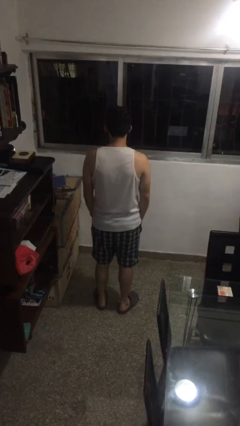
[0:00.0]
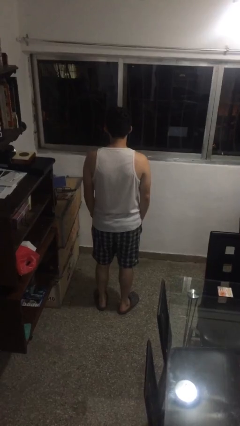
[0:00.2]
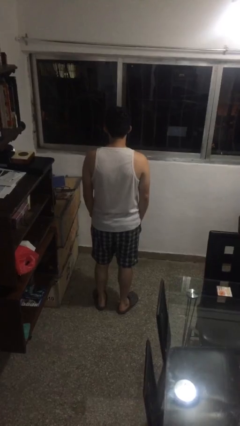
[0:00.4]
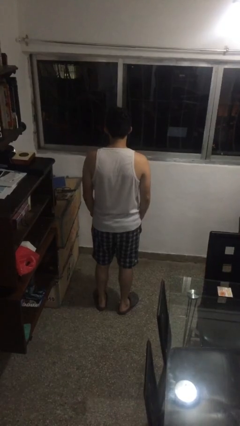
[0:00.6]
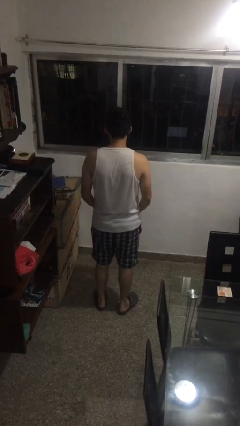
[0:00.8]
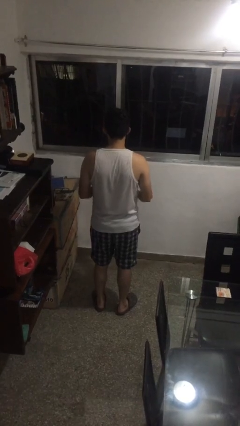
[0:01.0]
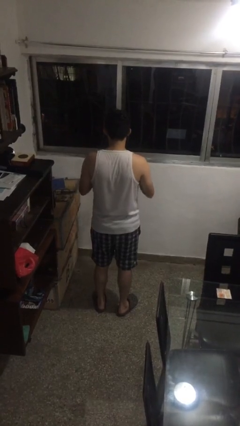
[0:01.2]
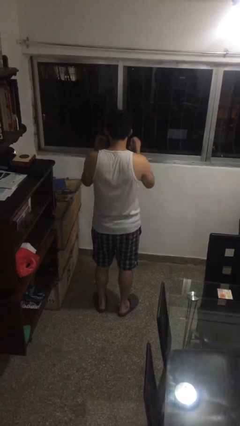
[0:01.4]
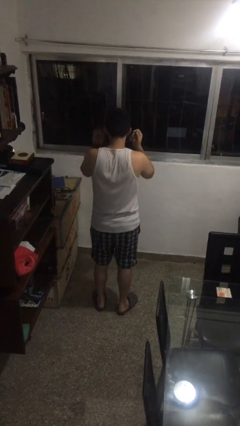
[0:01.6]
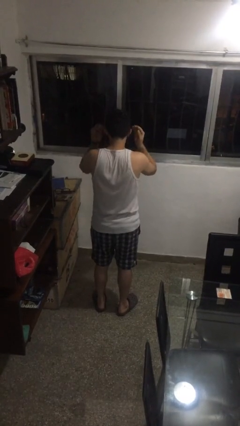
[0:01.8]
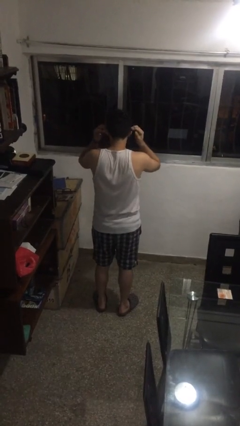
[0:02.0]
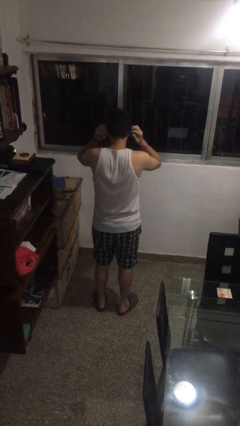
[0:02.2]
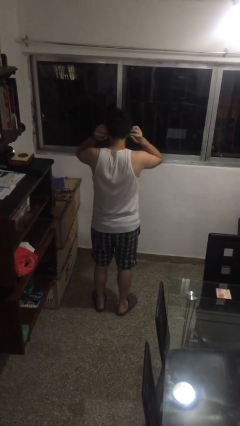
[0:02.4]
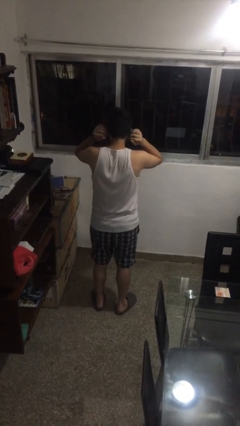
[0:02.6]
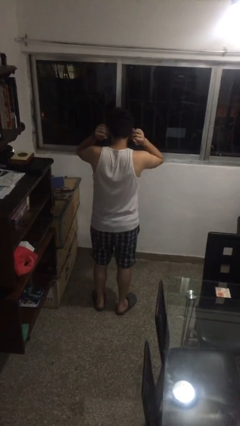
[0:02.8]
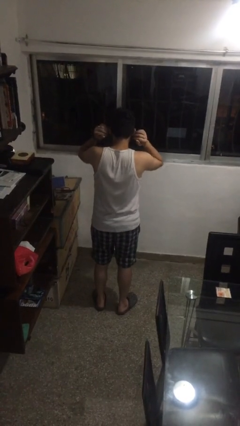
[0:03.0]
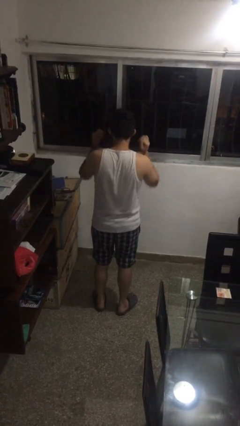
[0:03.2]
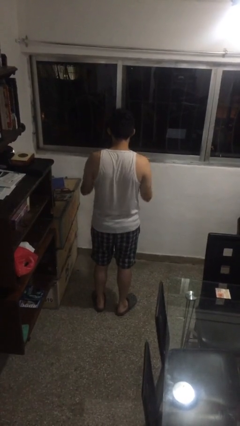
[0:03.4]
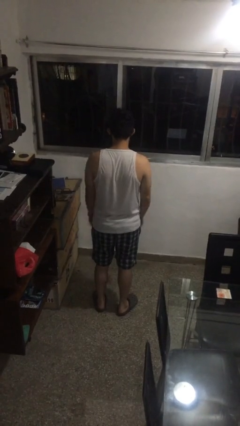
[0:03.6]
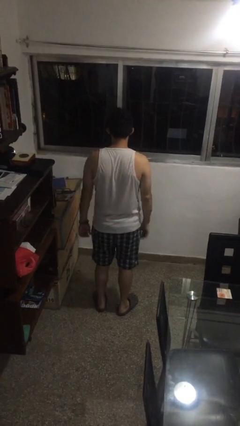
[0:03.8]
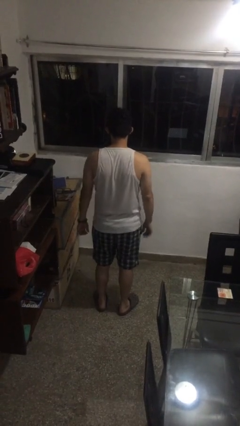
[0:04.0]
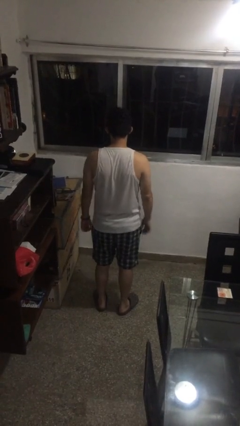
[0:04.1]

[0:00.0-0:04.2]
person puts on facemask

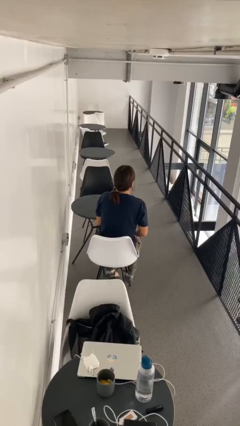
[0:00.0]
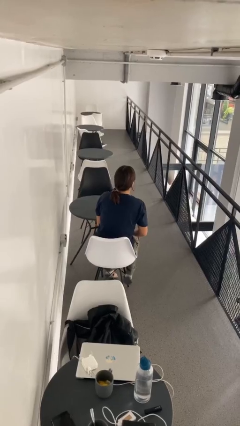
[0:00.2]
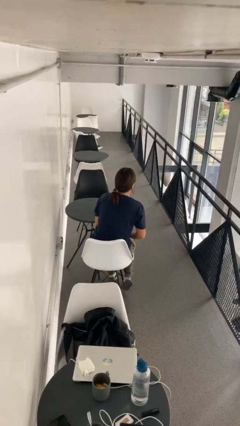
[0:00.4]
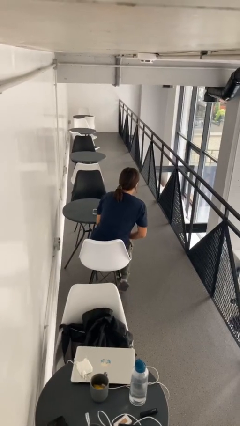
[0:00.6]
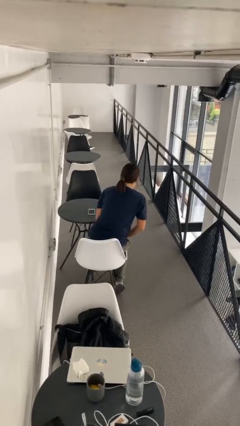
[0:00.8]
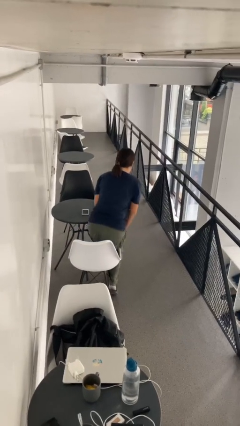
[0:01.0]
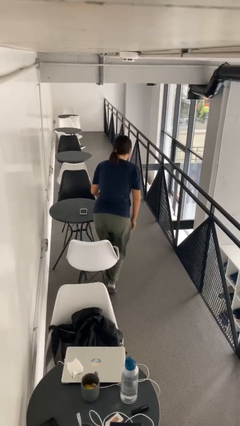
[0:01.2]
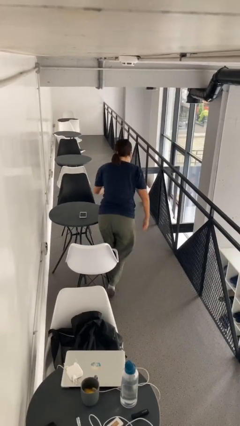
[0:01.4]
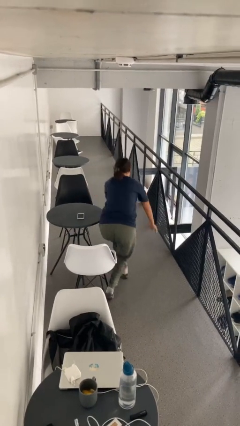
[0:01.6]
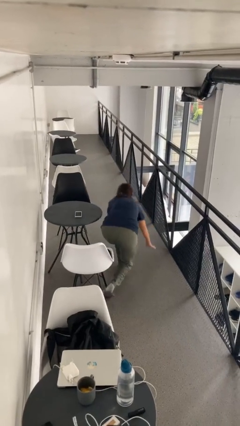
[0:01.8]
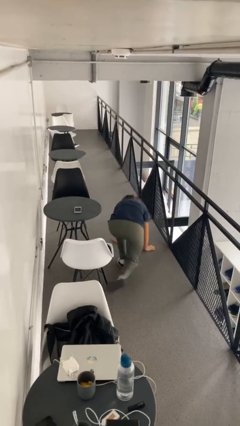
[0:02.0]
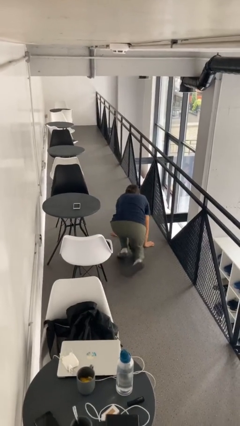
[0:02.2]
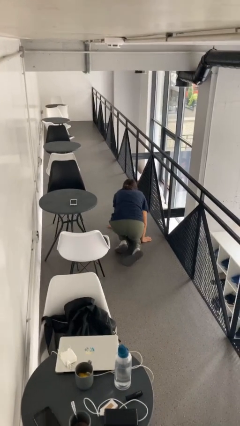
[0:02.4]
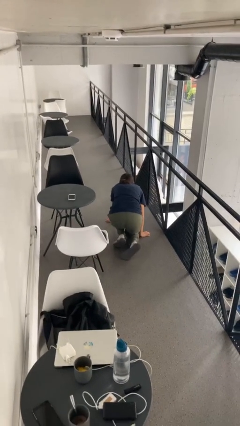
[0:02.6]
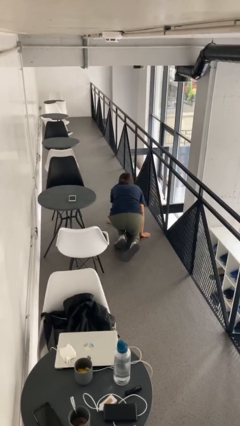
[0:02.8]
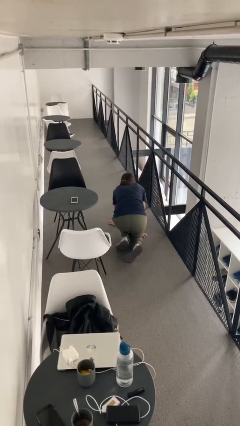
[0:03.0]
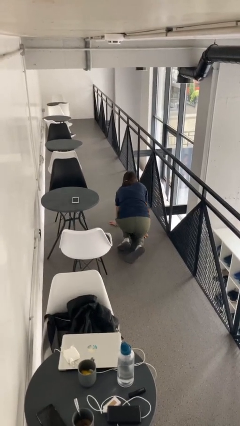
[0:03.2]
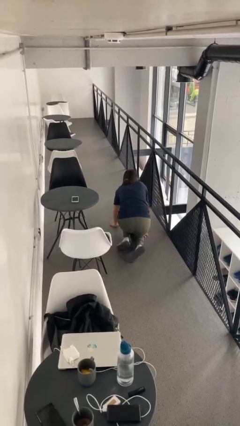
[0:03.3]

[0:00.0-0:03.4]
person falls from chair

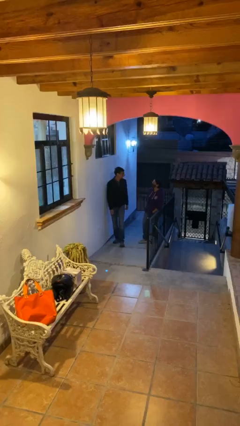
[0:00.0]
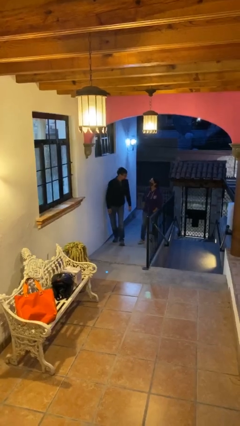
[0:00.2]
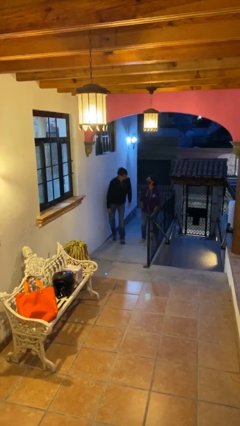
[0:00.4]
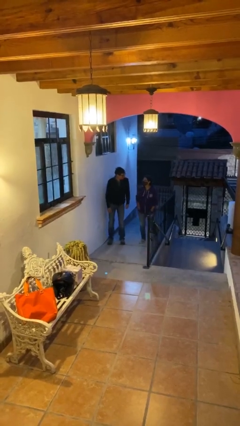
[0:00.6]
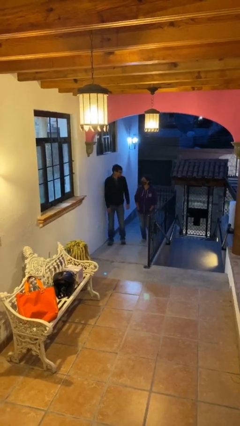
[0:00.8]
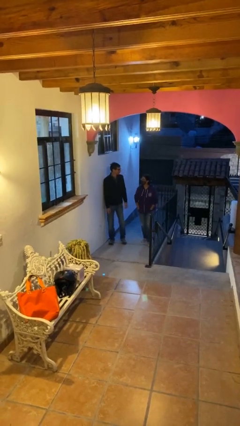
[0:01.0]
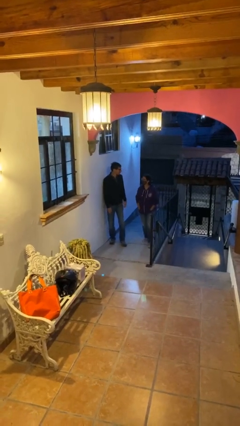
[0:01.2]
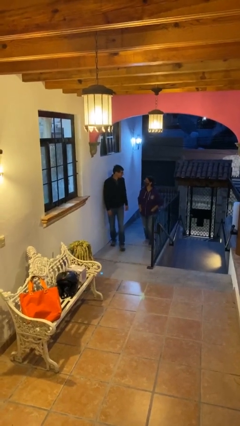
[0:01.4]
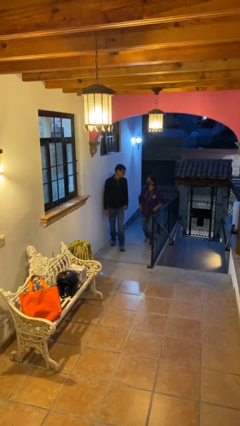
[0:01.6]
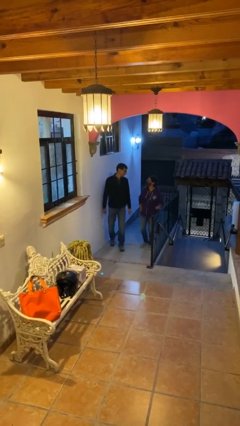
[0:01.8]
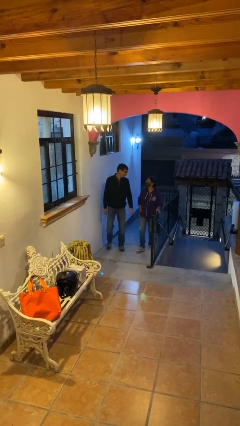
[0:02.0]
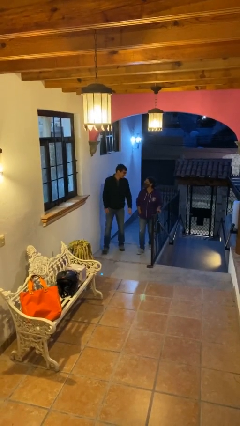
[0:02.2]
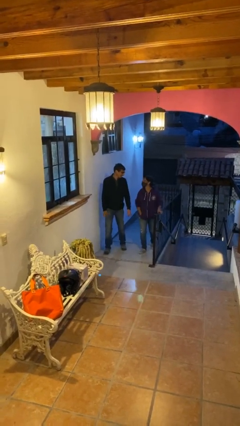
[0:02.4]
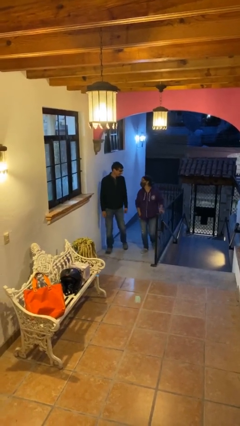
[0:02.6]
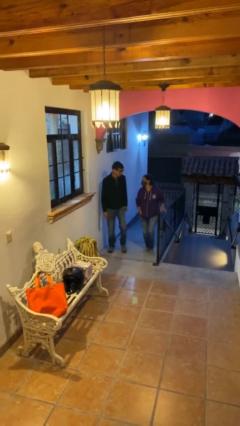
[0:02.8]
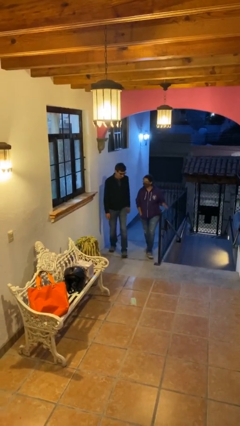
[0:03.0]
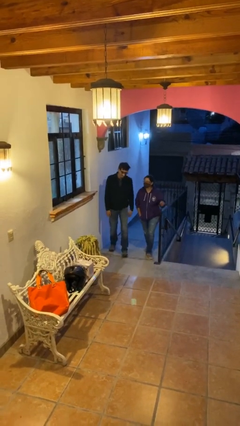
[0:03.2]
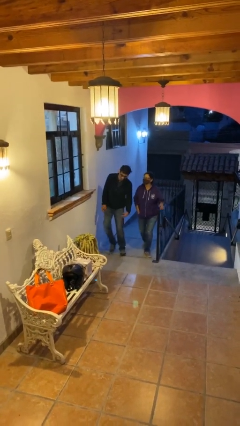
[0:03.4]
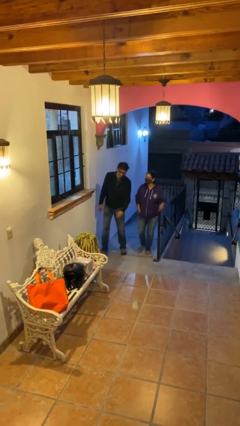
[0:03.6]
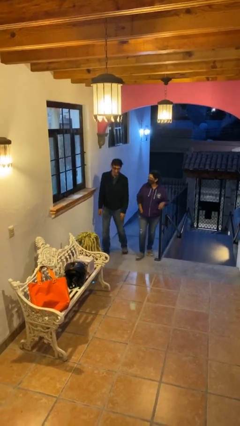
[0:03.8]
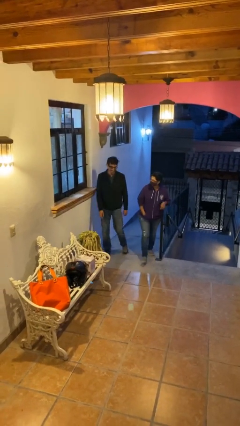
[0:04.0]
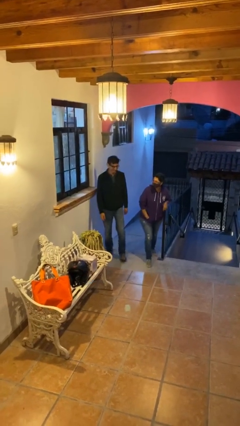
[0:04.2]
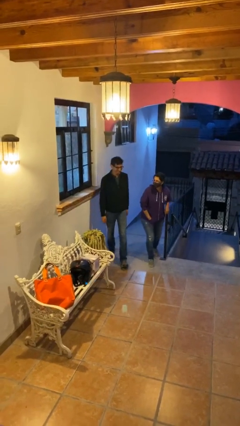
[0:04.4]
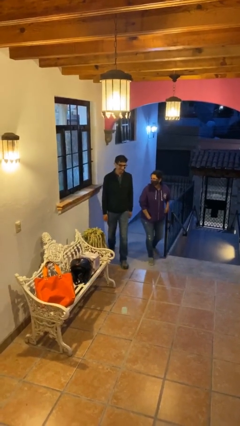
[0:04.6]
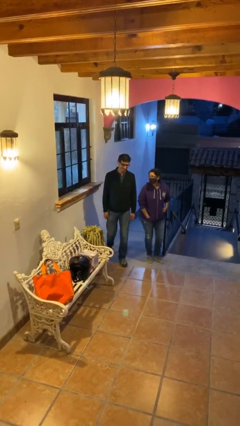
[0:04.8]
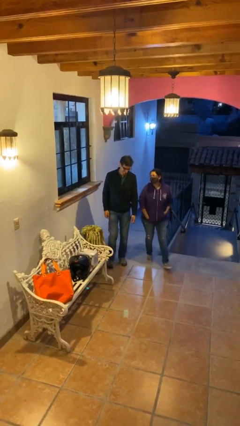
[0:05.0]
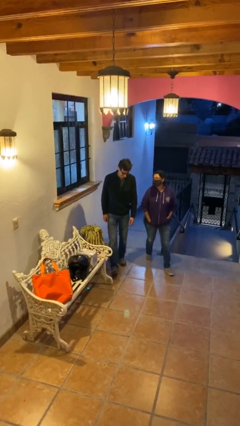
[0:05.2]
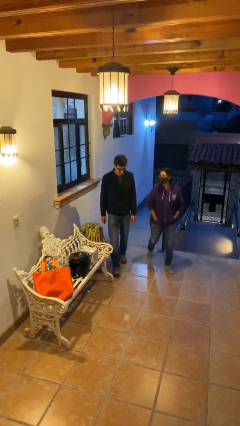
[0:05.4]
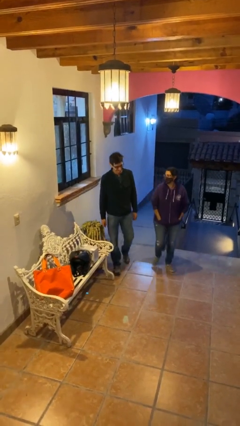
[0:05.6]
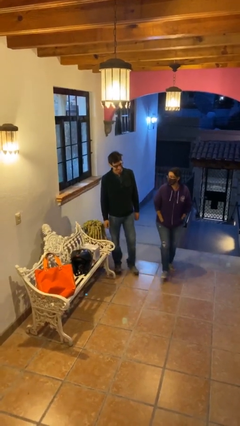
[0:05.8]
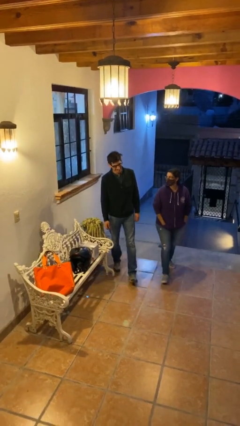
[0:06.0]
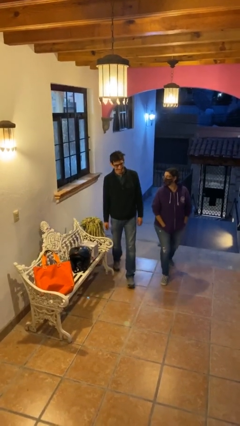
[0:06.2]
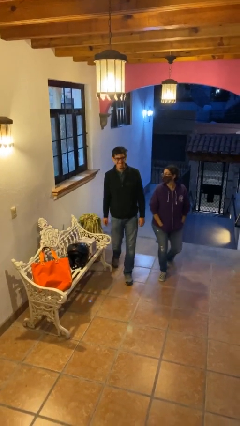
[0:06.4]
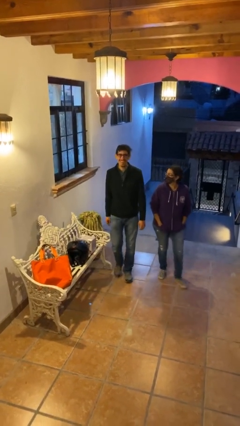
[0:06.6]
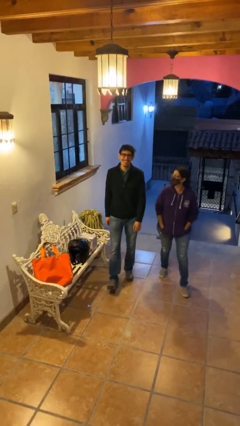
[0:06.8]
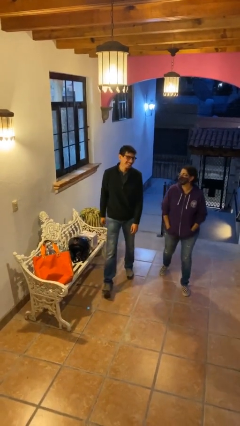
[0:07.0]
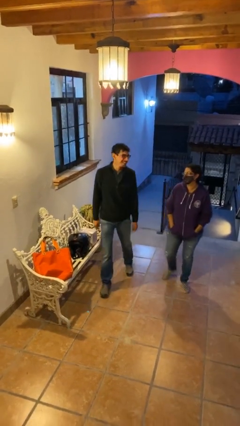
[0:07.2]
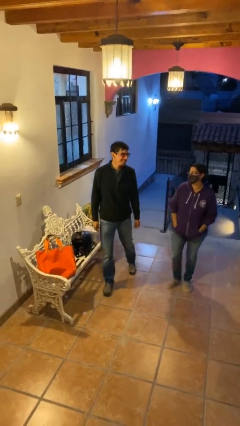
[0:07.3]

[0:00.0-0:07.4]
person talks to person

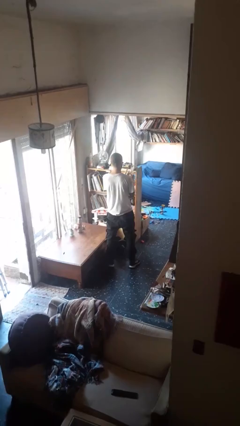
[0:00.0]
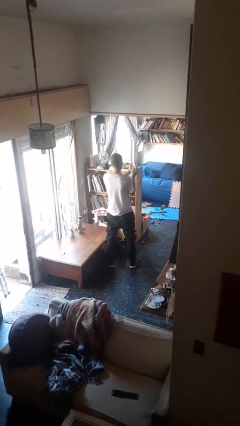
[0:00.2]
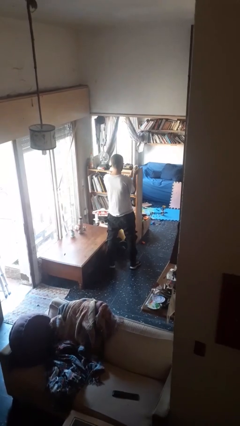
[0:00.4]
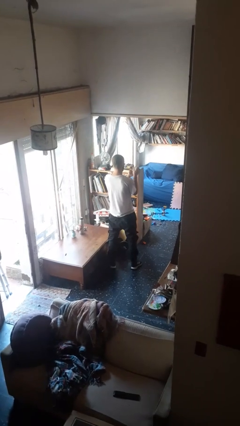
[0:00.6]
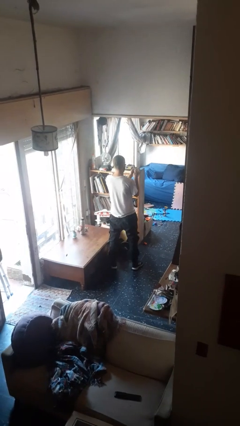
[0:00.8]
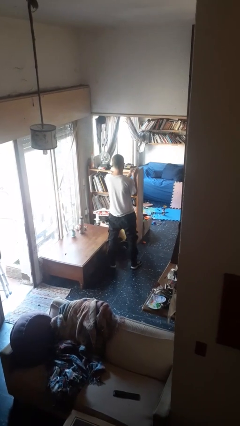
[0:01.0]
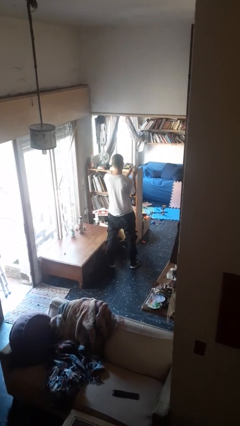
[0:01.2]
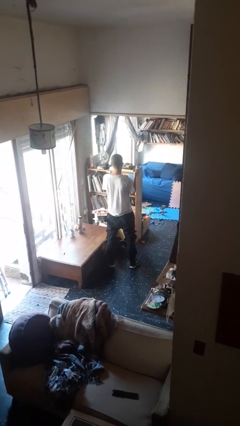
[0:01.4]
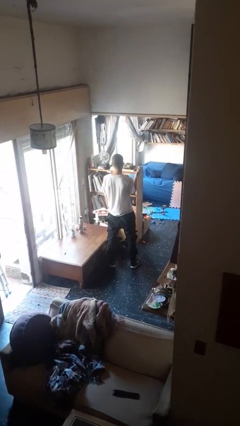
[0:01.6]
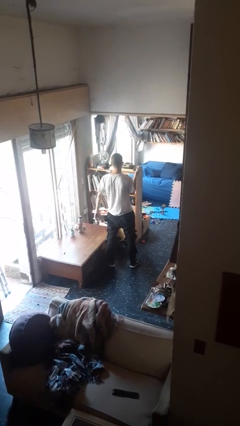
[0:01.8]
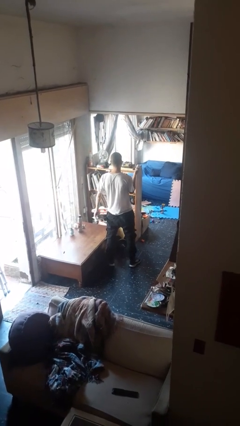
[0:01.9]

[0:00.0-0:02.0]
person crumples paper

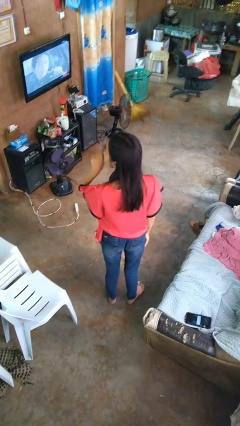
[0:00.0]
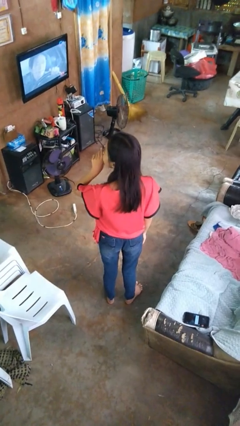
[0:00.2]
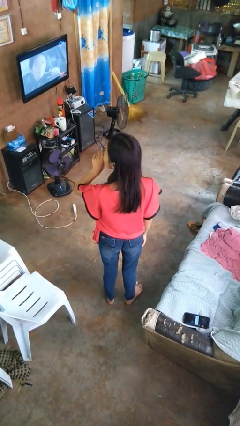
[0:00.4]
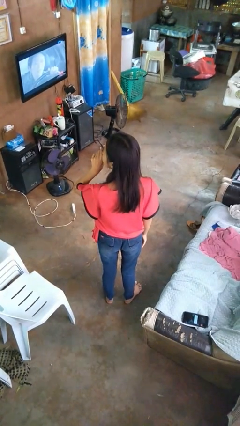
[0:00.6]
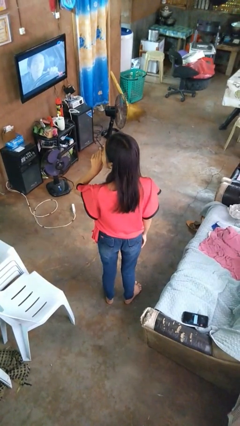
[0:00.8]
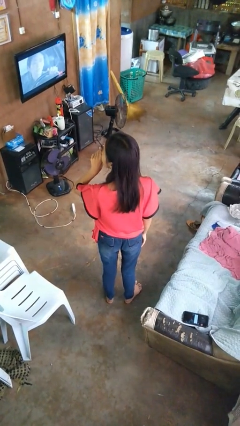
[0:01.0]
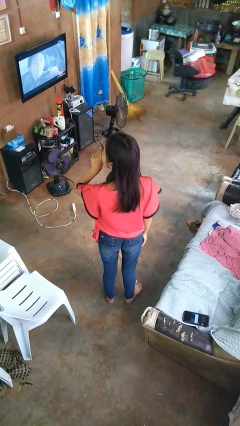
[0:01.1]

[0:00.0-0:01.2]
person gestures be quiet
